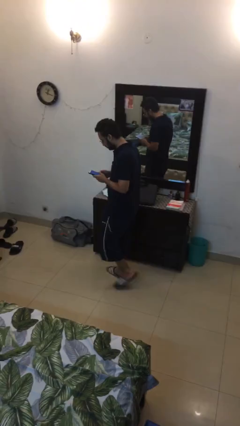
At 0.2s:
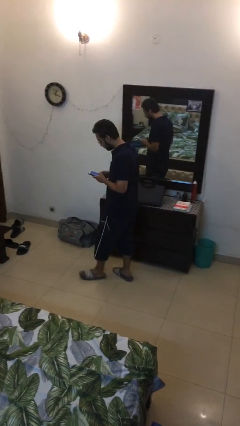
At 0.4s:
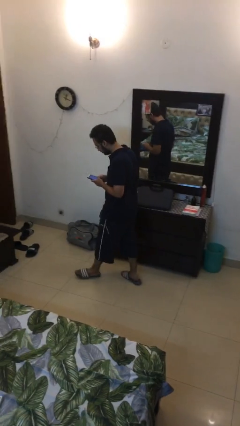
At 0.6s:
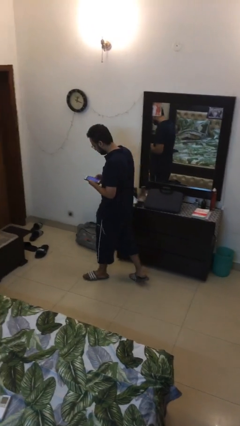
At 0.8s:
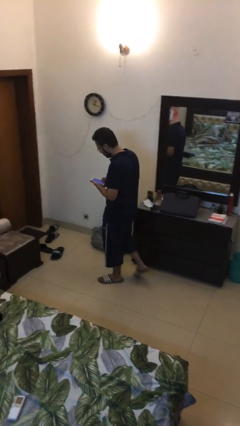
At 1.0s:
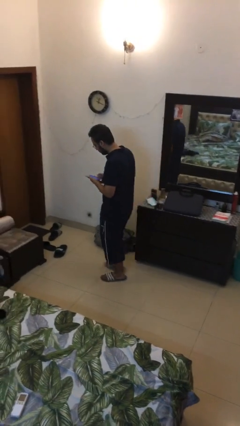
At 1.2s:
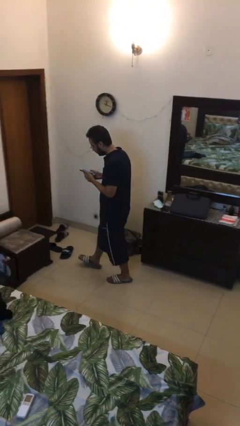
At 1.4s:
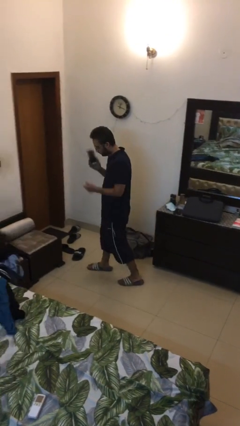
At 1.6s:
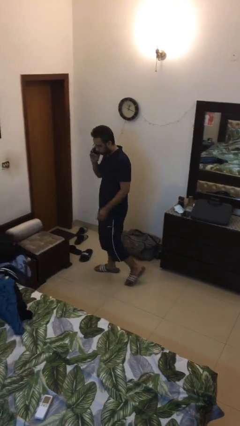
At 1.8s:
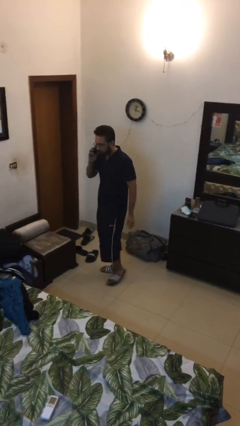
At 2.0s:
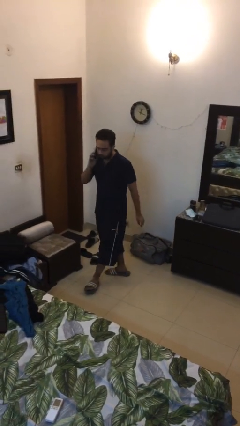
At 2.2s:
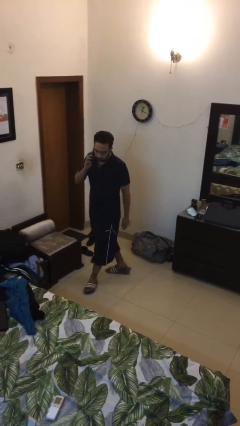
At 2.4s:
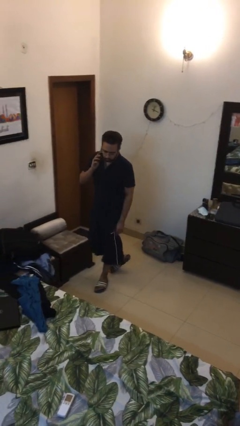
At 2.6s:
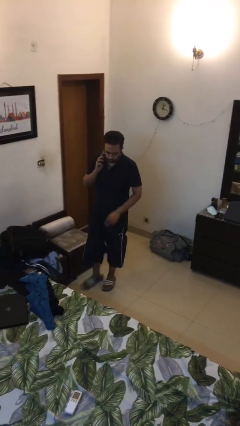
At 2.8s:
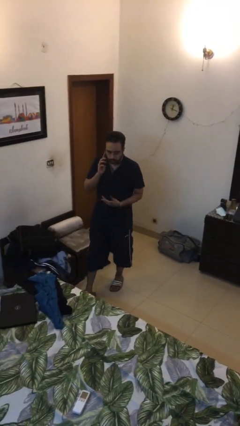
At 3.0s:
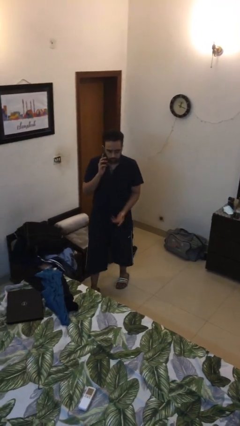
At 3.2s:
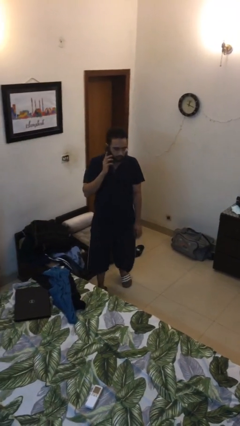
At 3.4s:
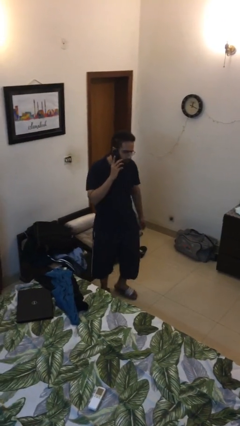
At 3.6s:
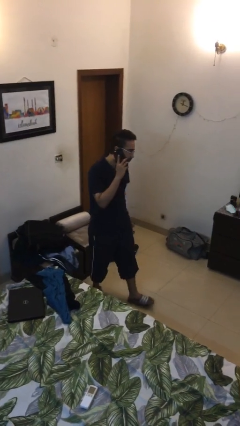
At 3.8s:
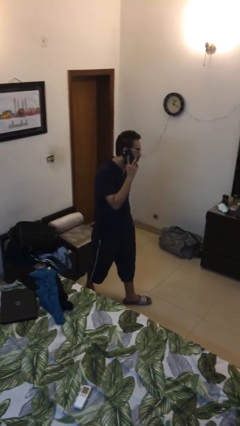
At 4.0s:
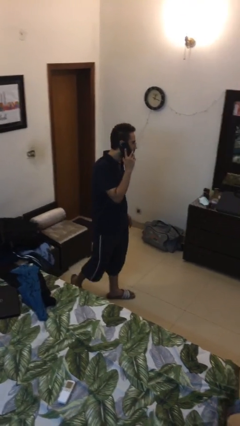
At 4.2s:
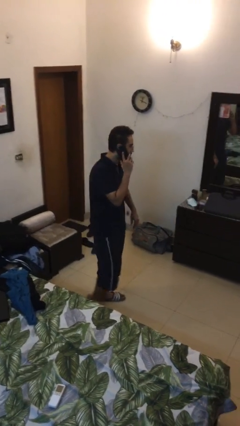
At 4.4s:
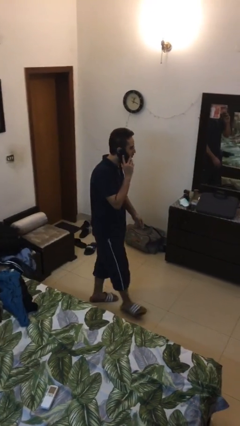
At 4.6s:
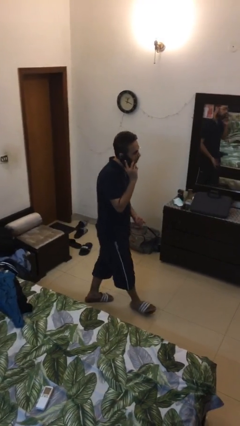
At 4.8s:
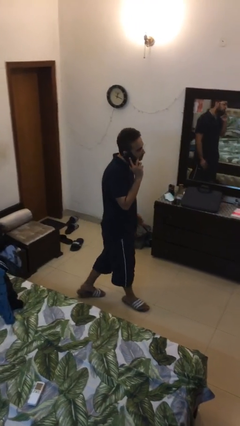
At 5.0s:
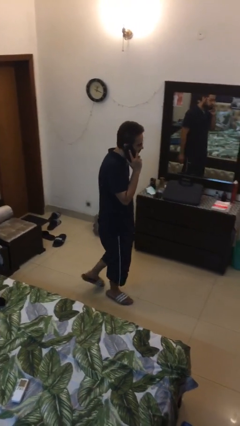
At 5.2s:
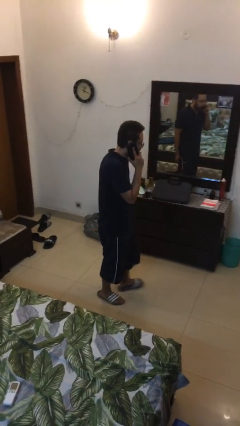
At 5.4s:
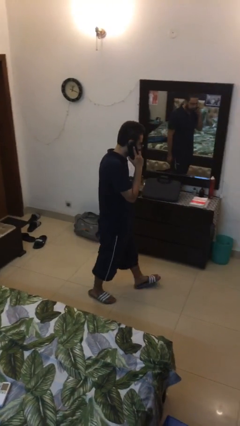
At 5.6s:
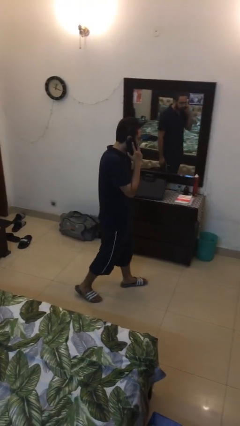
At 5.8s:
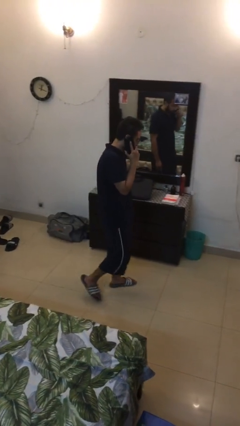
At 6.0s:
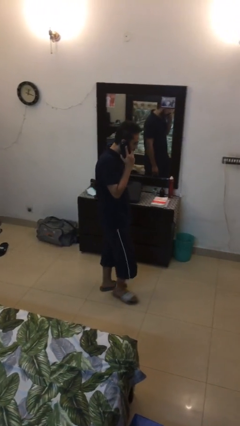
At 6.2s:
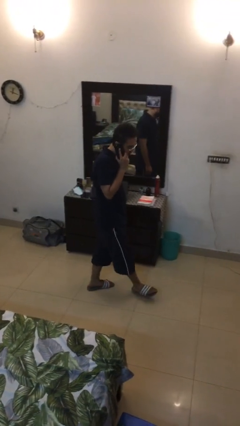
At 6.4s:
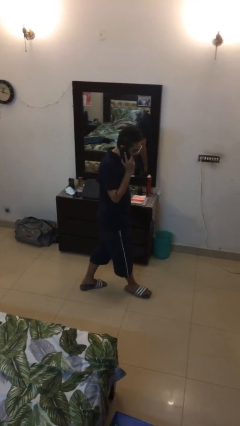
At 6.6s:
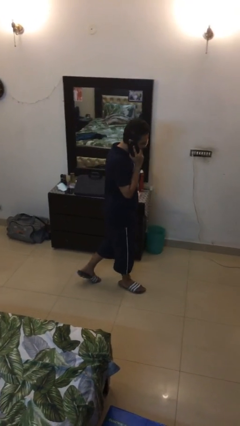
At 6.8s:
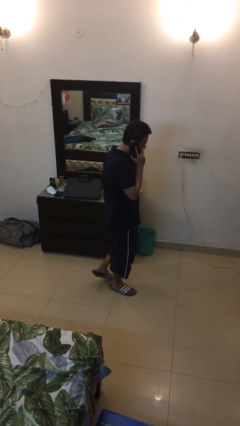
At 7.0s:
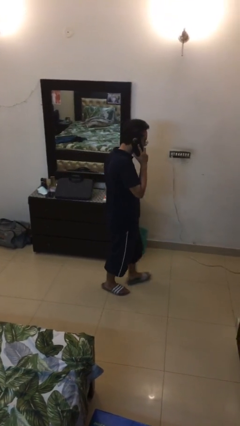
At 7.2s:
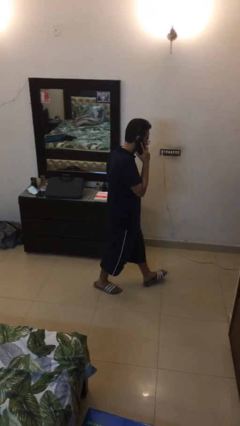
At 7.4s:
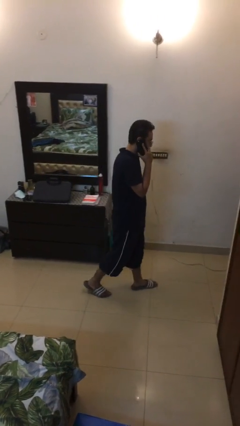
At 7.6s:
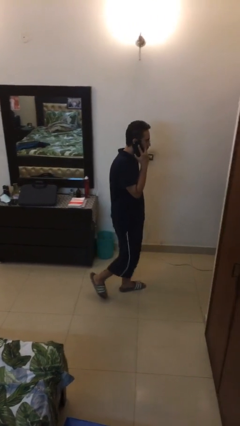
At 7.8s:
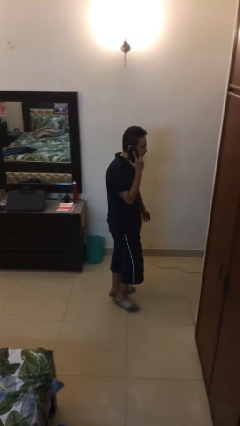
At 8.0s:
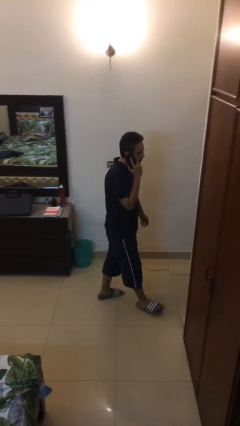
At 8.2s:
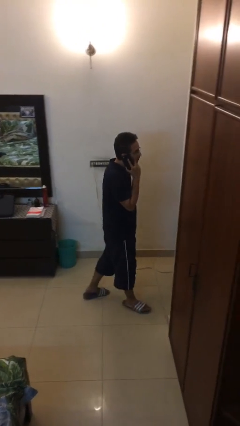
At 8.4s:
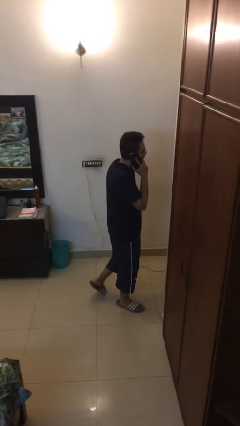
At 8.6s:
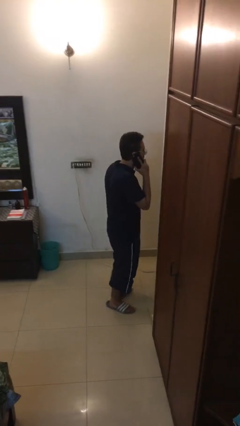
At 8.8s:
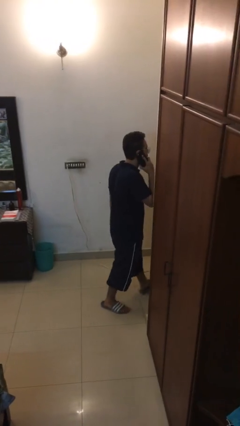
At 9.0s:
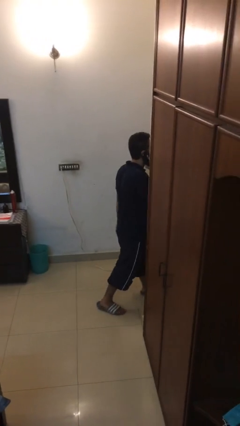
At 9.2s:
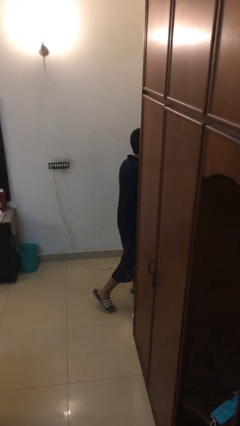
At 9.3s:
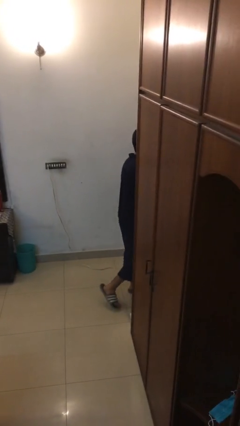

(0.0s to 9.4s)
person talks on phone

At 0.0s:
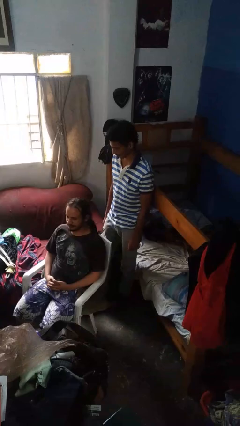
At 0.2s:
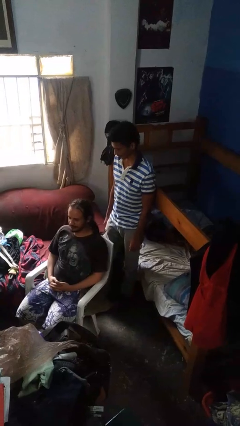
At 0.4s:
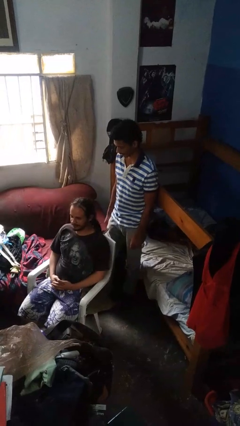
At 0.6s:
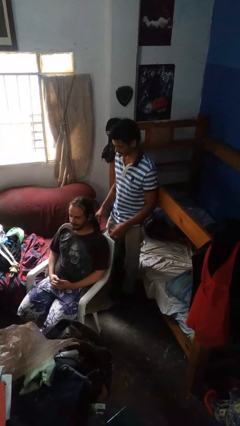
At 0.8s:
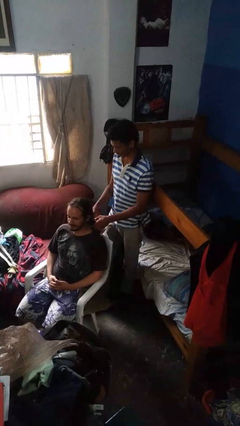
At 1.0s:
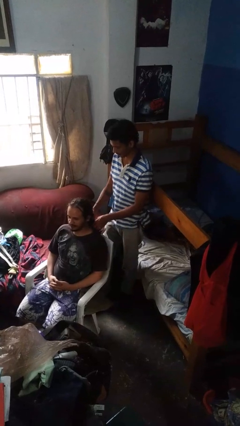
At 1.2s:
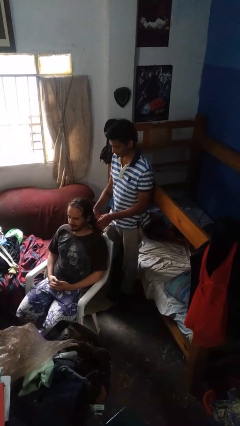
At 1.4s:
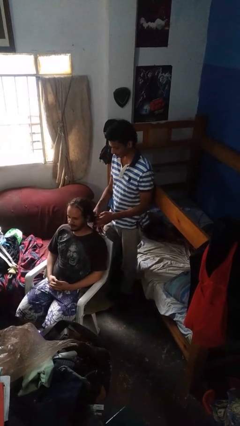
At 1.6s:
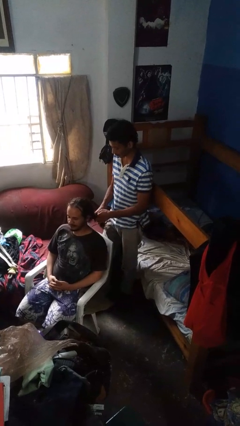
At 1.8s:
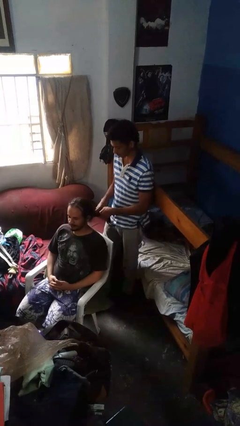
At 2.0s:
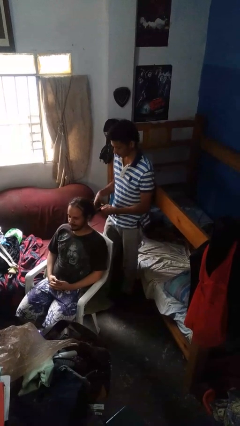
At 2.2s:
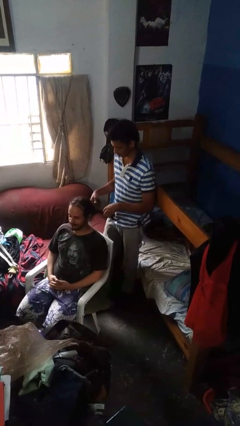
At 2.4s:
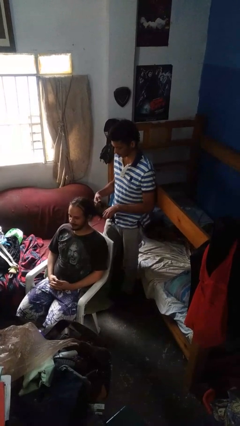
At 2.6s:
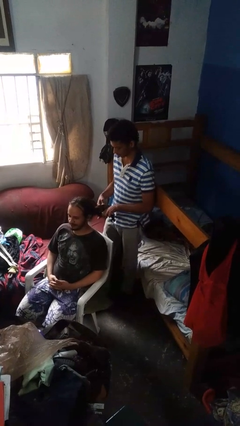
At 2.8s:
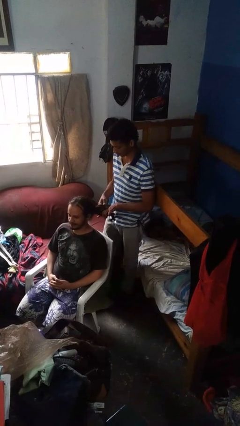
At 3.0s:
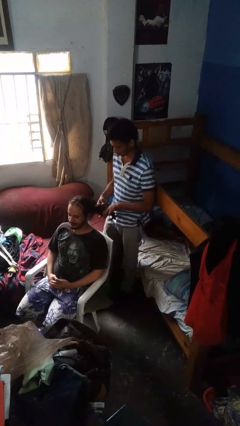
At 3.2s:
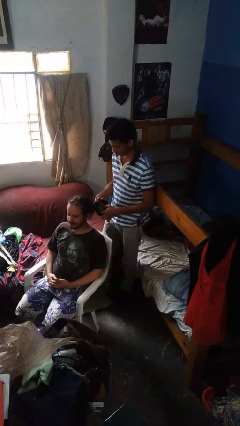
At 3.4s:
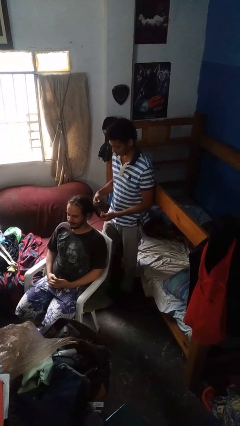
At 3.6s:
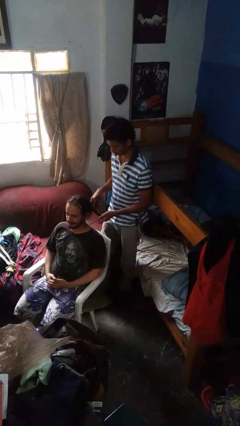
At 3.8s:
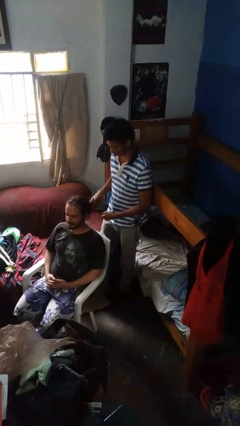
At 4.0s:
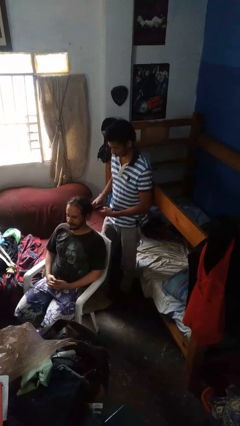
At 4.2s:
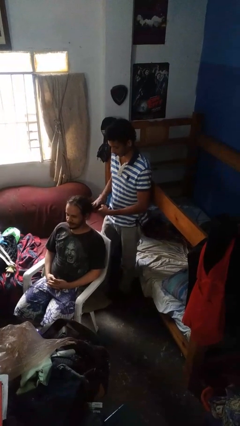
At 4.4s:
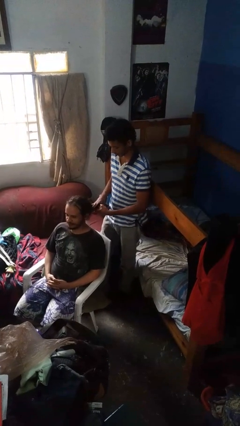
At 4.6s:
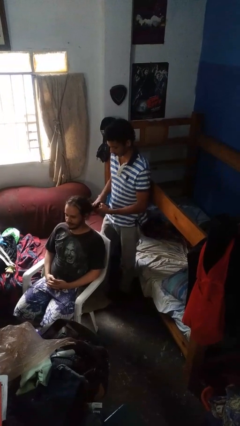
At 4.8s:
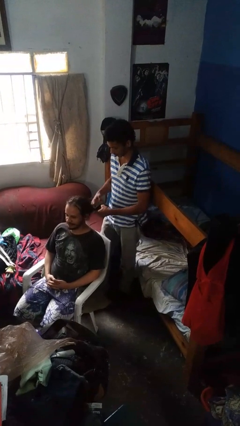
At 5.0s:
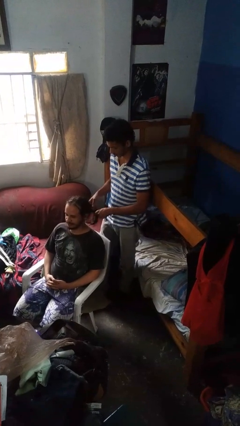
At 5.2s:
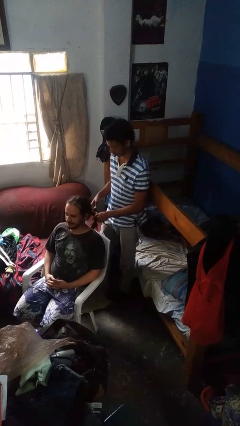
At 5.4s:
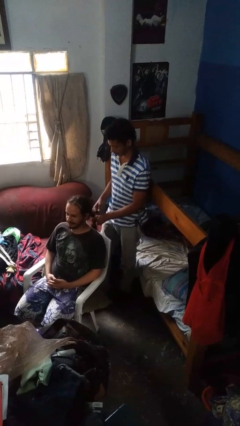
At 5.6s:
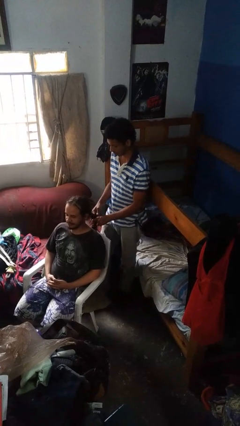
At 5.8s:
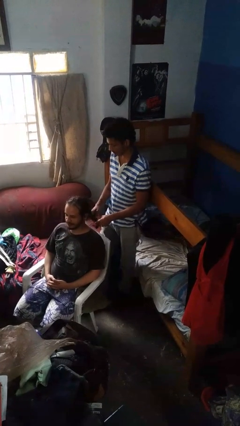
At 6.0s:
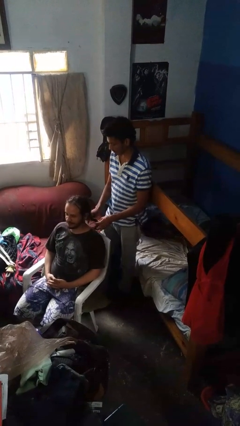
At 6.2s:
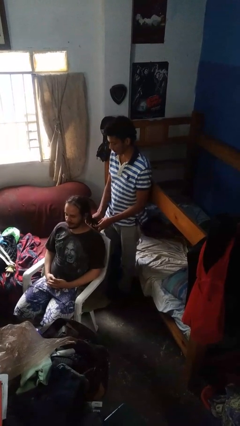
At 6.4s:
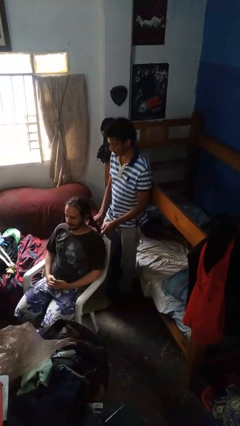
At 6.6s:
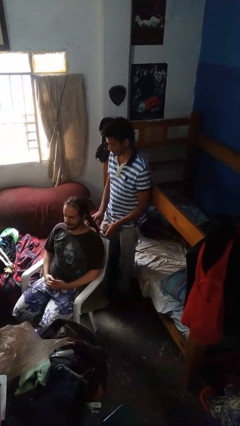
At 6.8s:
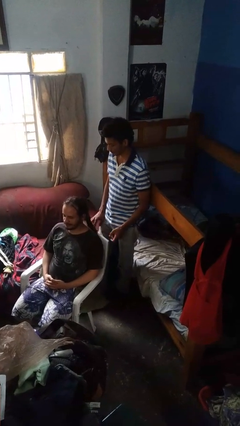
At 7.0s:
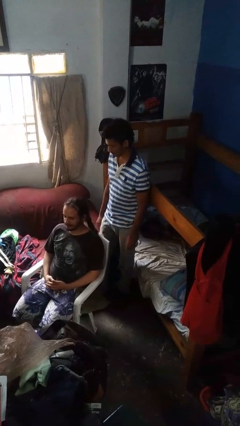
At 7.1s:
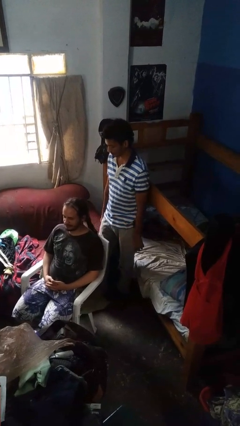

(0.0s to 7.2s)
person braids hair of person

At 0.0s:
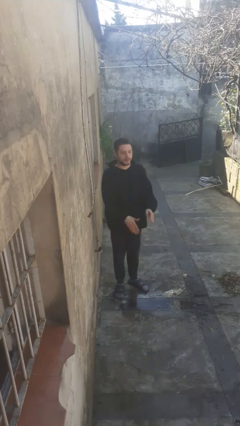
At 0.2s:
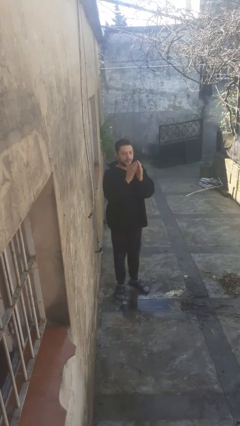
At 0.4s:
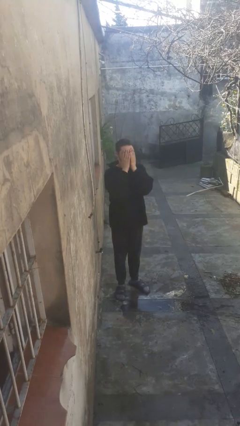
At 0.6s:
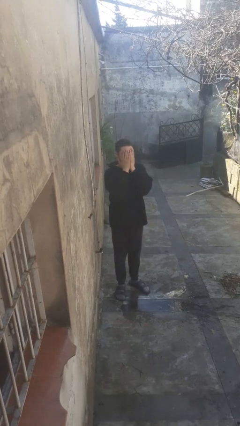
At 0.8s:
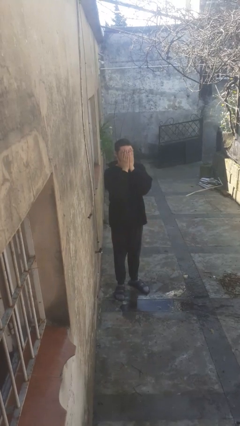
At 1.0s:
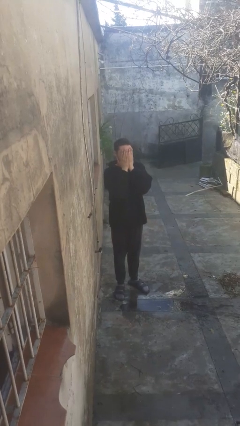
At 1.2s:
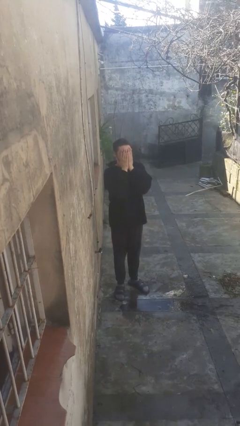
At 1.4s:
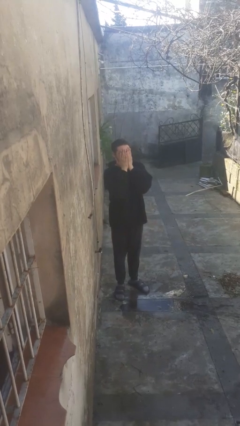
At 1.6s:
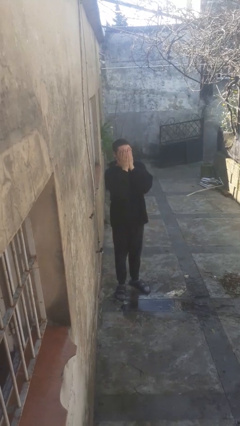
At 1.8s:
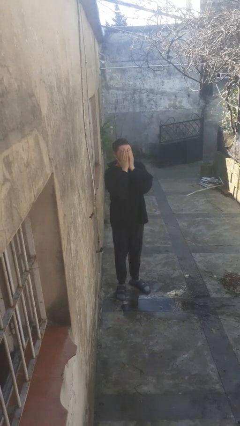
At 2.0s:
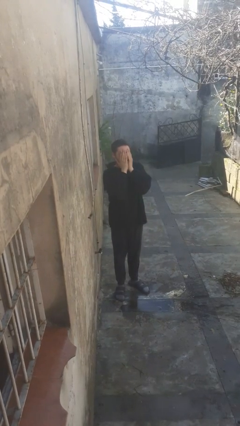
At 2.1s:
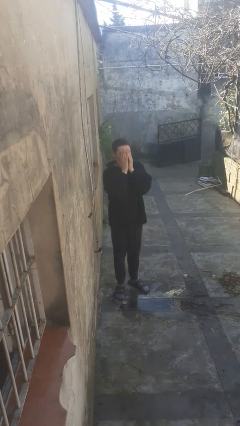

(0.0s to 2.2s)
person covers face with hands
